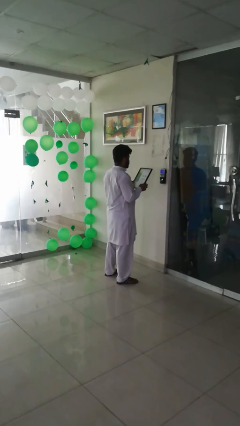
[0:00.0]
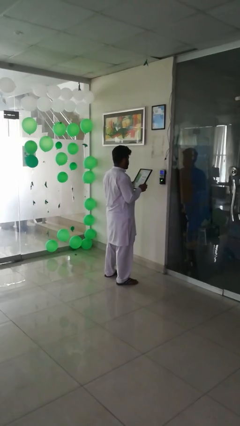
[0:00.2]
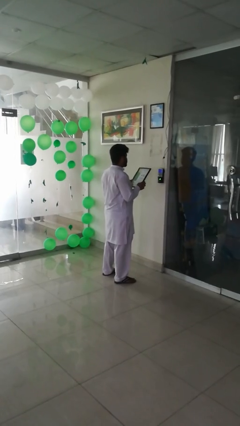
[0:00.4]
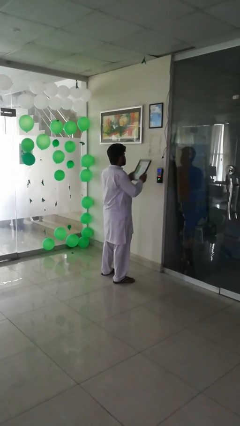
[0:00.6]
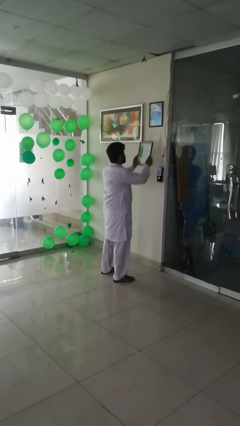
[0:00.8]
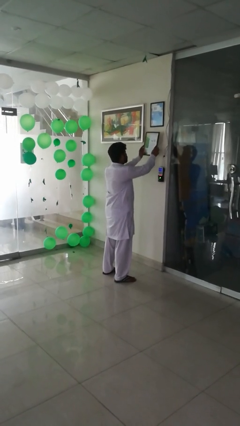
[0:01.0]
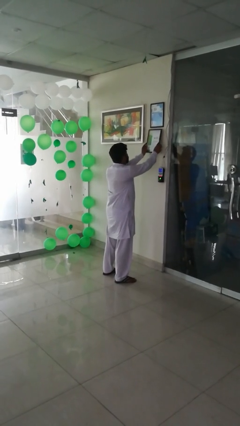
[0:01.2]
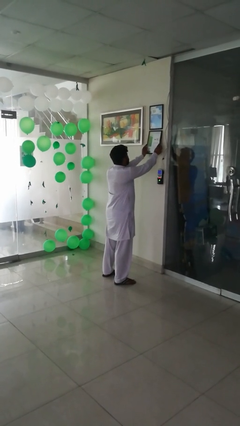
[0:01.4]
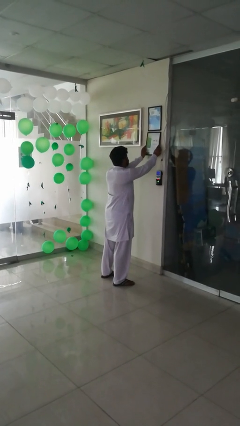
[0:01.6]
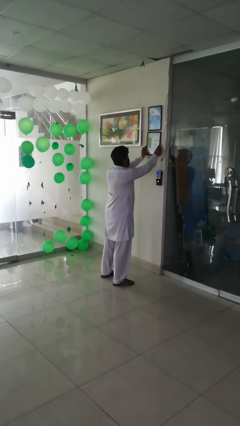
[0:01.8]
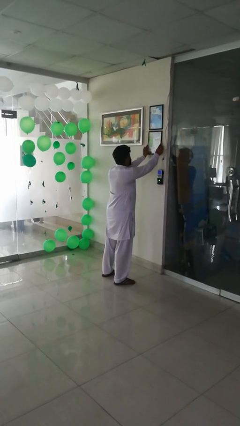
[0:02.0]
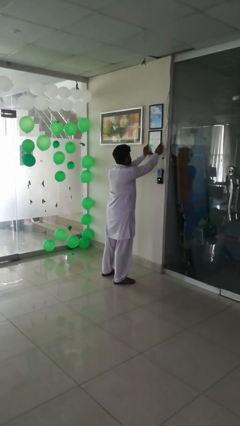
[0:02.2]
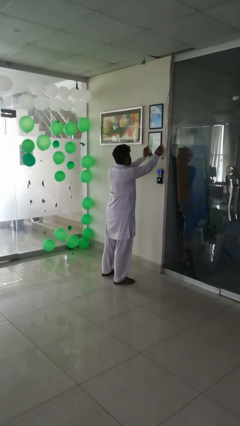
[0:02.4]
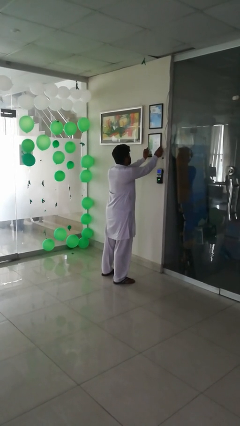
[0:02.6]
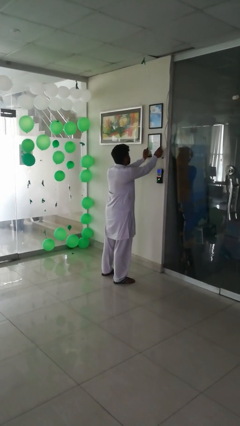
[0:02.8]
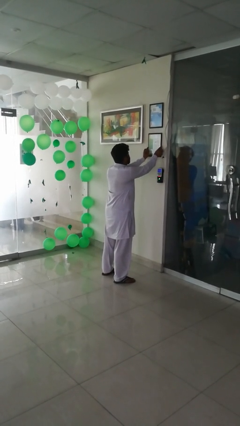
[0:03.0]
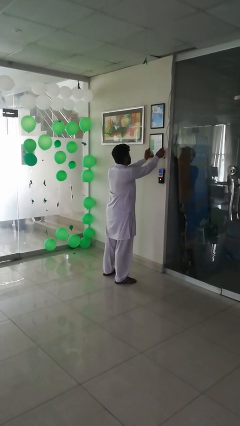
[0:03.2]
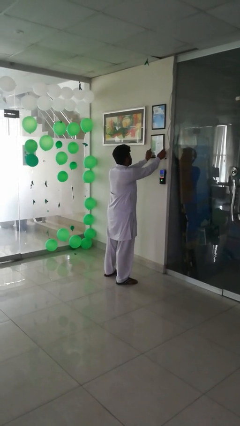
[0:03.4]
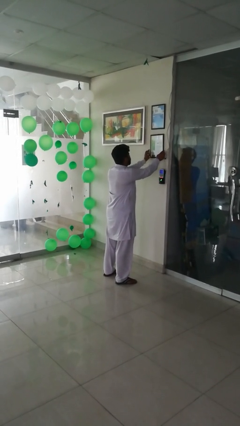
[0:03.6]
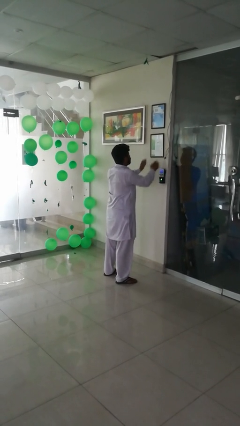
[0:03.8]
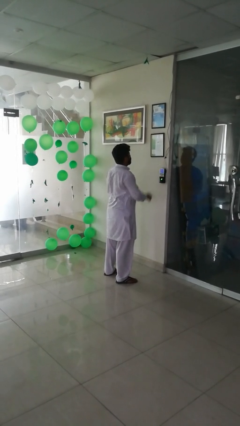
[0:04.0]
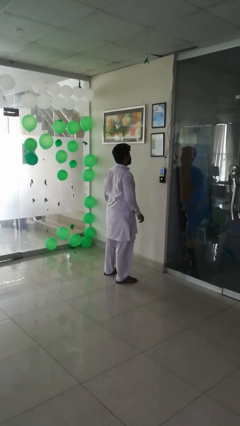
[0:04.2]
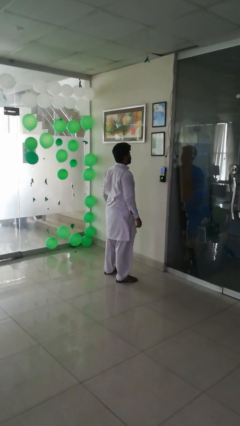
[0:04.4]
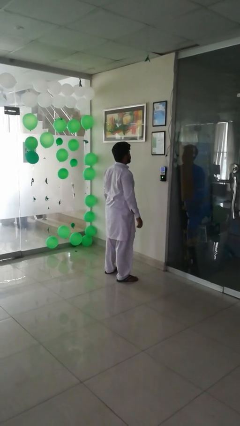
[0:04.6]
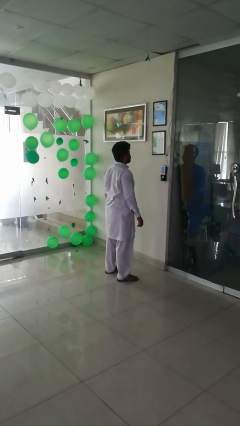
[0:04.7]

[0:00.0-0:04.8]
person puts up smoke detector

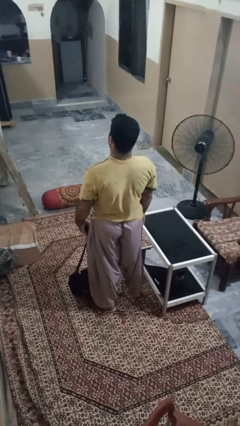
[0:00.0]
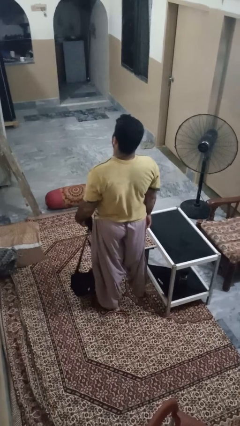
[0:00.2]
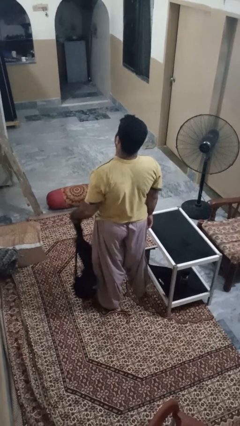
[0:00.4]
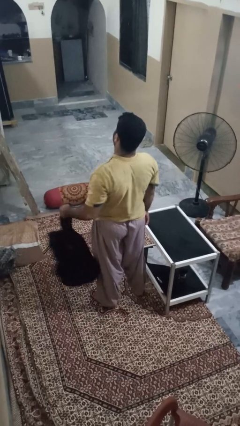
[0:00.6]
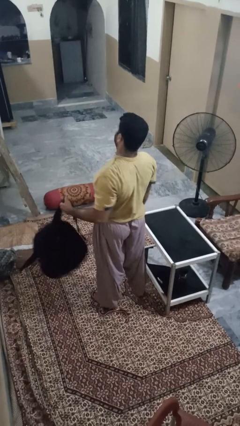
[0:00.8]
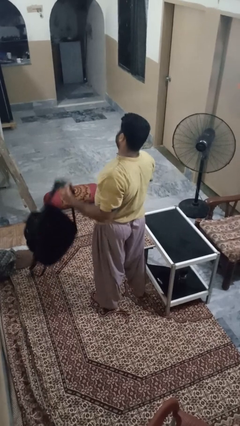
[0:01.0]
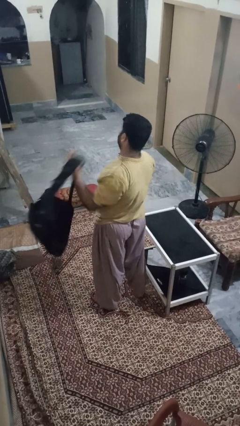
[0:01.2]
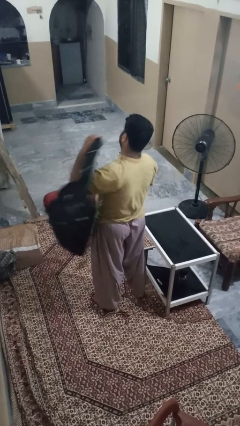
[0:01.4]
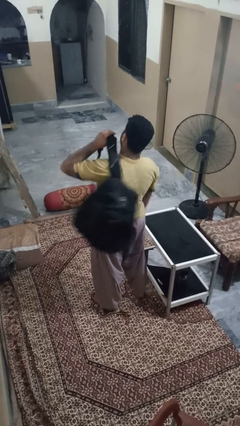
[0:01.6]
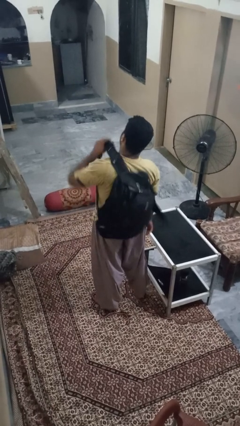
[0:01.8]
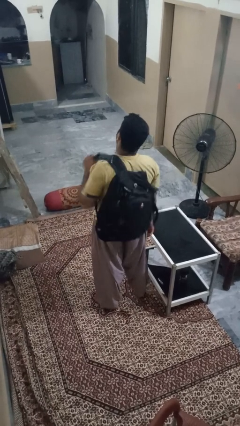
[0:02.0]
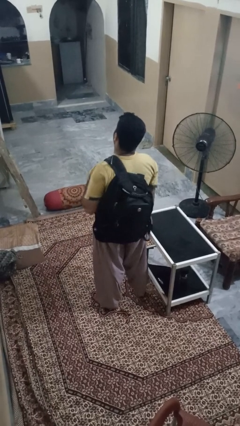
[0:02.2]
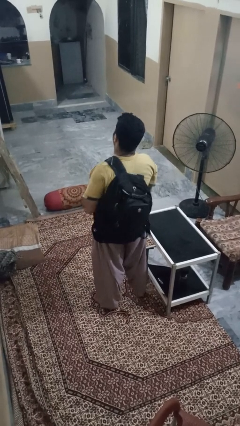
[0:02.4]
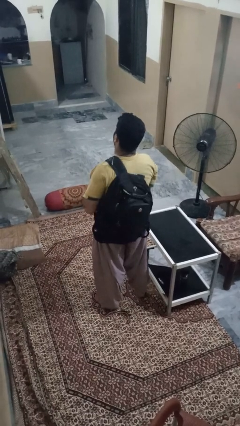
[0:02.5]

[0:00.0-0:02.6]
person puts on backpack

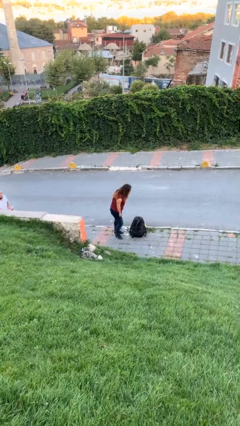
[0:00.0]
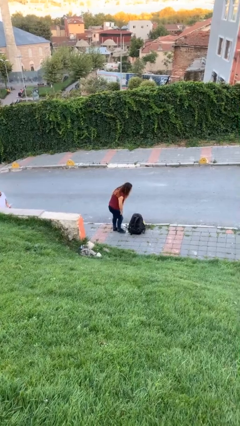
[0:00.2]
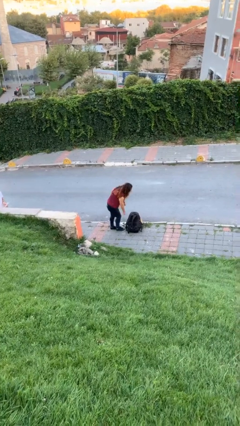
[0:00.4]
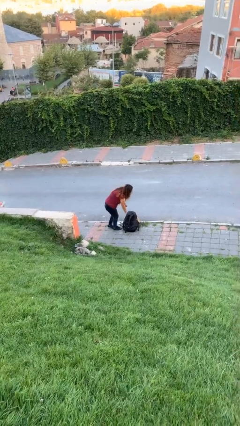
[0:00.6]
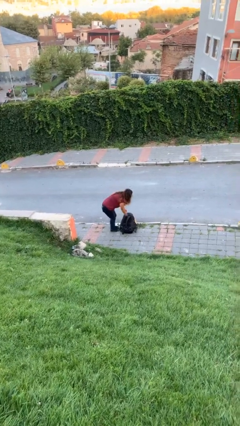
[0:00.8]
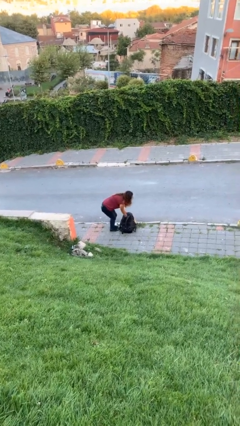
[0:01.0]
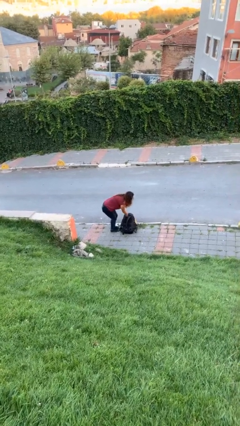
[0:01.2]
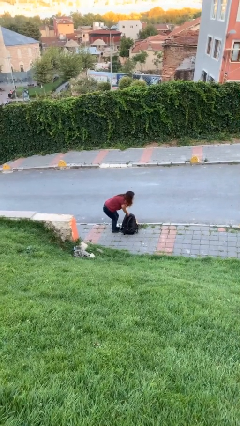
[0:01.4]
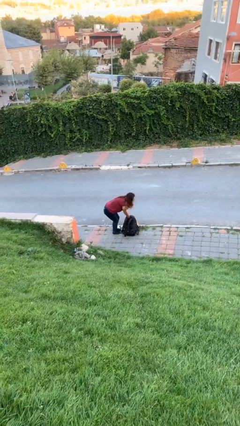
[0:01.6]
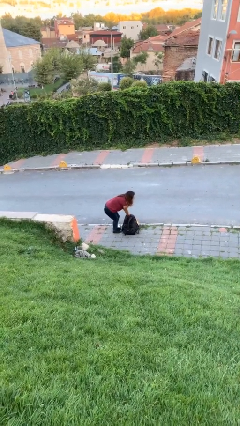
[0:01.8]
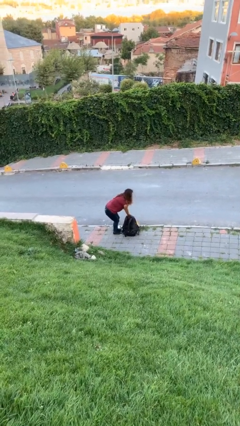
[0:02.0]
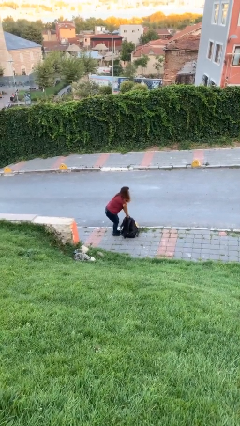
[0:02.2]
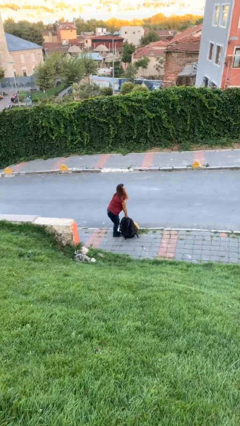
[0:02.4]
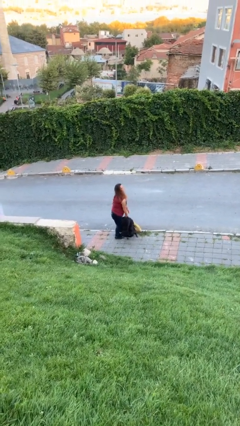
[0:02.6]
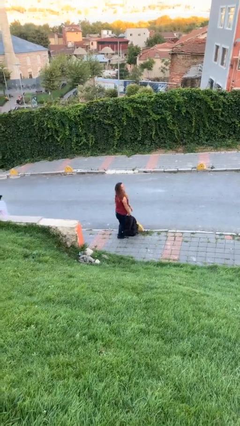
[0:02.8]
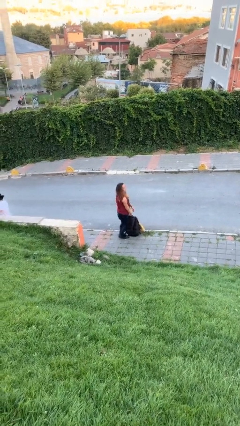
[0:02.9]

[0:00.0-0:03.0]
person picks up object from floor

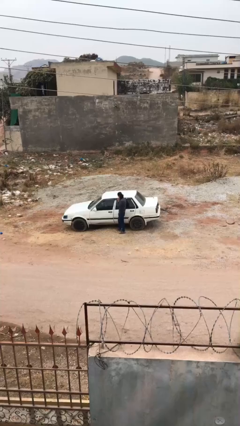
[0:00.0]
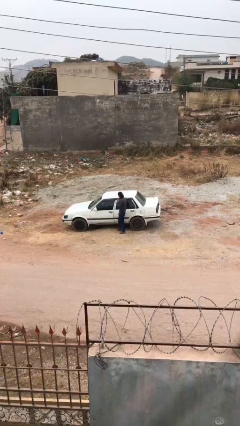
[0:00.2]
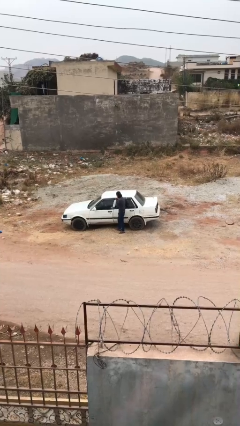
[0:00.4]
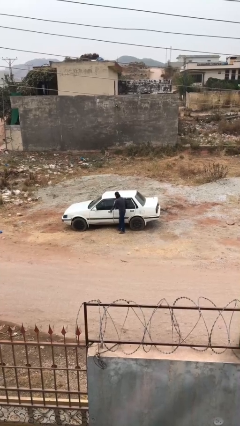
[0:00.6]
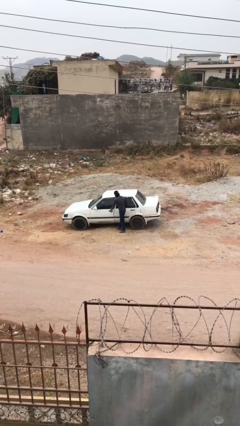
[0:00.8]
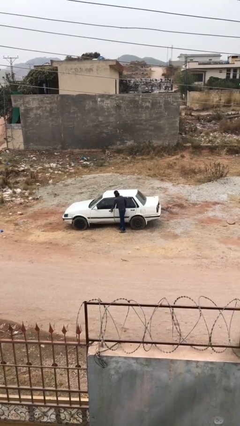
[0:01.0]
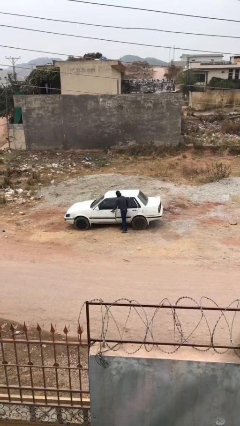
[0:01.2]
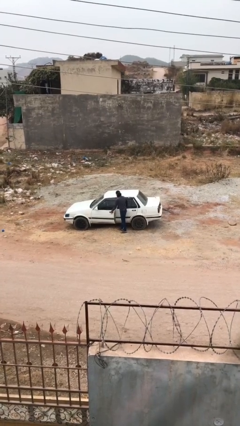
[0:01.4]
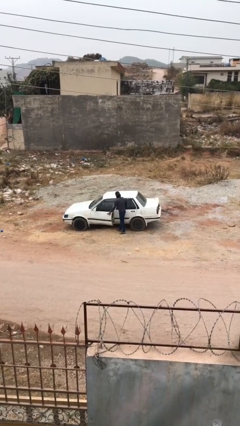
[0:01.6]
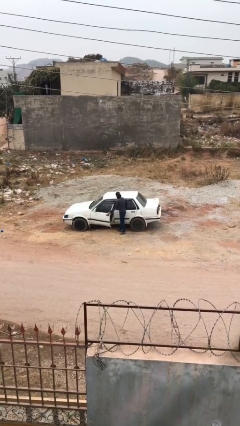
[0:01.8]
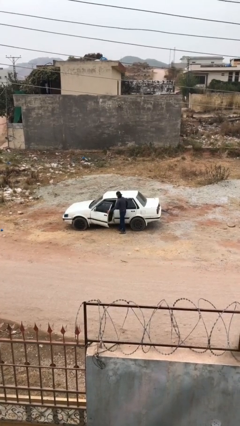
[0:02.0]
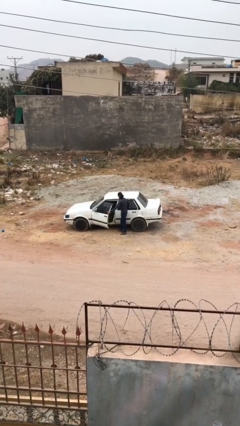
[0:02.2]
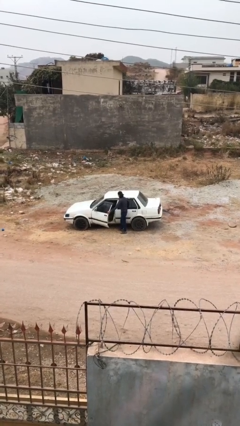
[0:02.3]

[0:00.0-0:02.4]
person opens car door

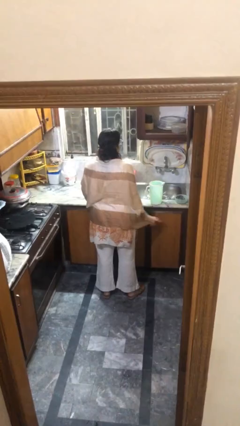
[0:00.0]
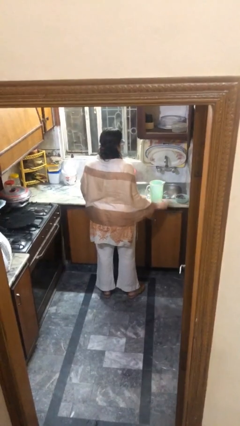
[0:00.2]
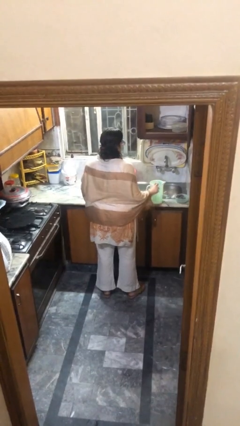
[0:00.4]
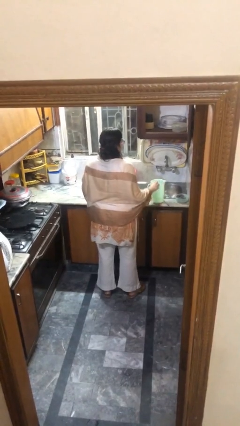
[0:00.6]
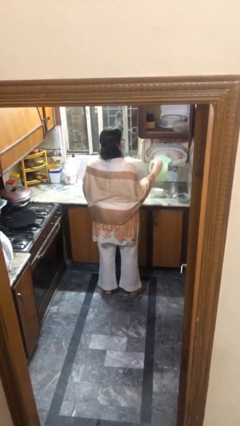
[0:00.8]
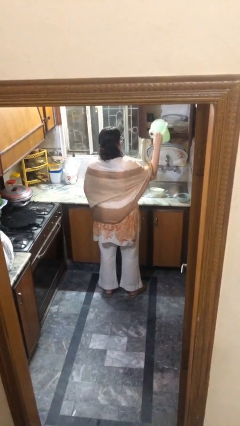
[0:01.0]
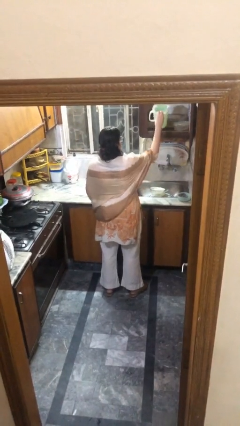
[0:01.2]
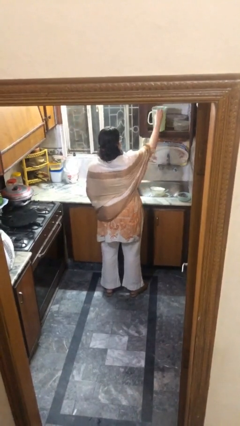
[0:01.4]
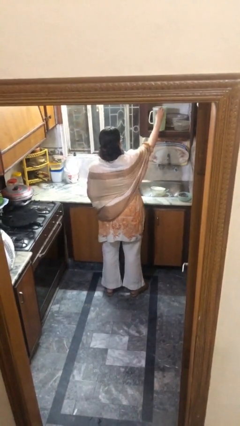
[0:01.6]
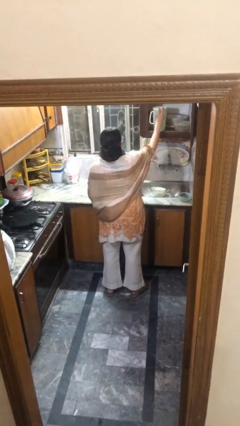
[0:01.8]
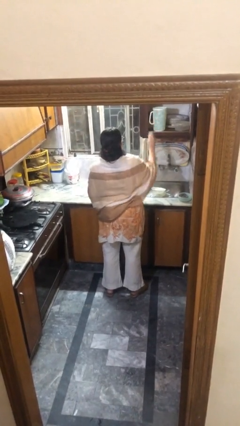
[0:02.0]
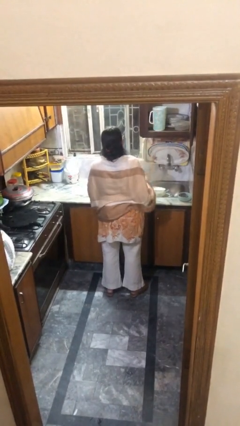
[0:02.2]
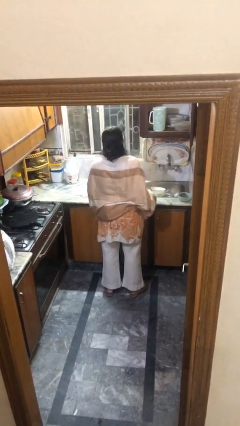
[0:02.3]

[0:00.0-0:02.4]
person puts object into kitchen drawer

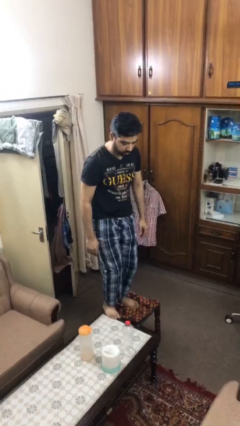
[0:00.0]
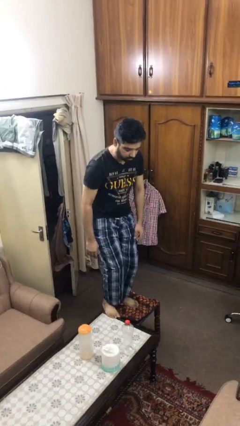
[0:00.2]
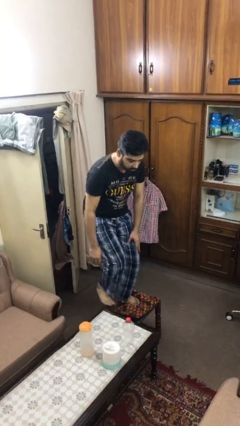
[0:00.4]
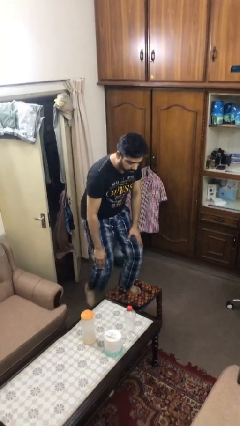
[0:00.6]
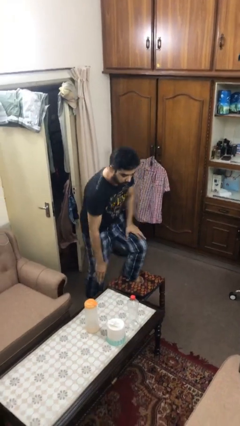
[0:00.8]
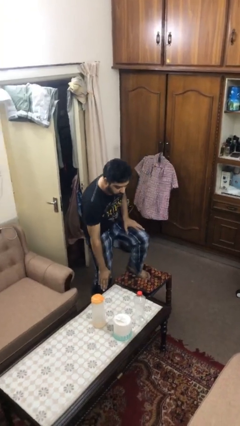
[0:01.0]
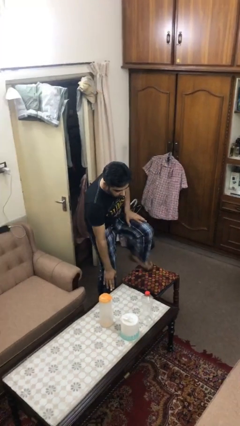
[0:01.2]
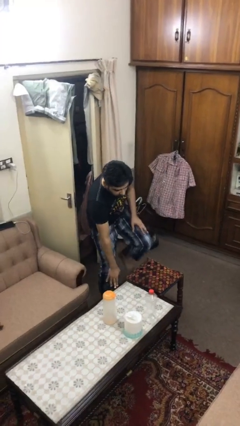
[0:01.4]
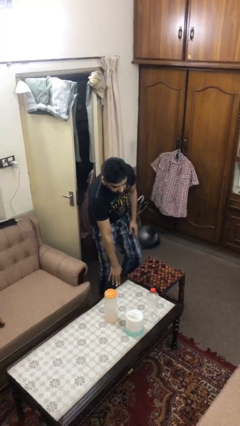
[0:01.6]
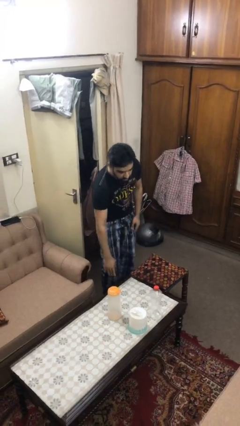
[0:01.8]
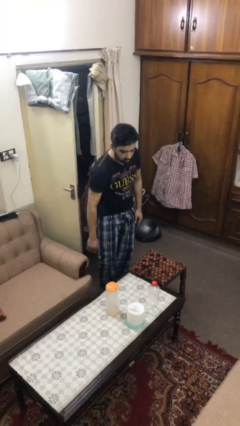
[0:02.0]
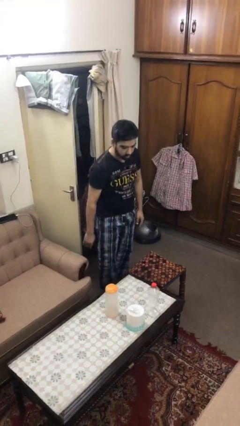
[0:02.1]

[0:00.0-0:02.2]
person climbs off table

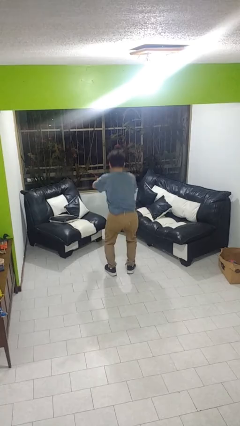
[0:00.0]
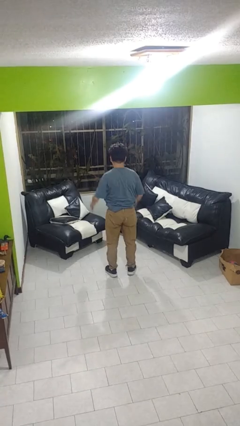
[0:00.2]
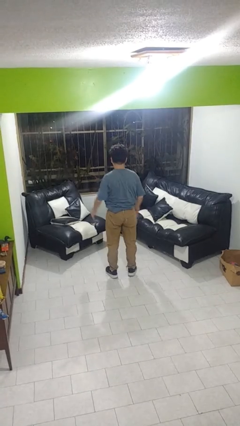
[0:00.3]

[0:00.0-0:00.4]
person stands up
